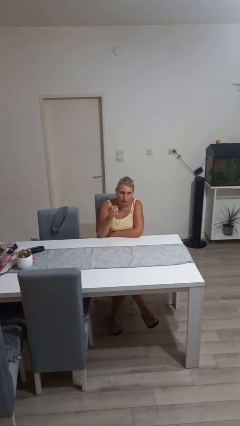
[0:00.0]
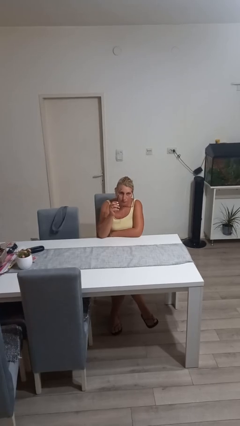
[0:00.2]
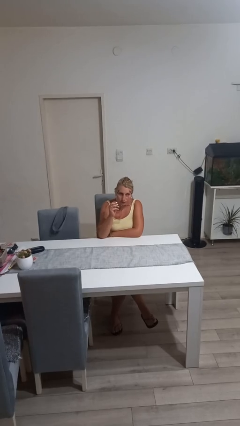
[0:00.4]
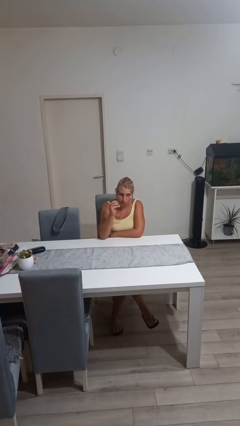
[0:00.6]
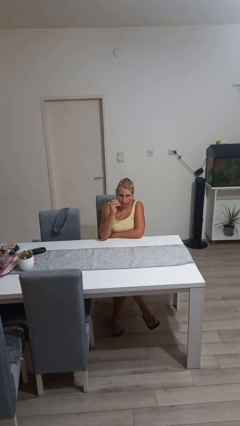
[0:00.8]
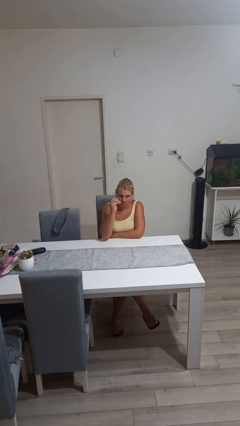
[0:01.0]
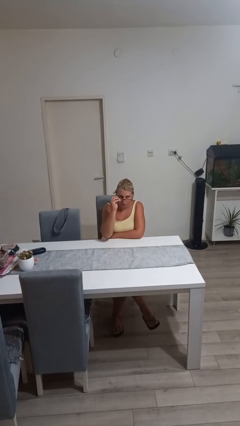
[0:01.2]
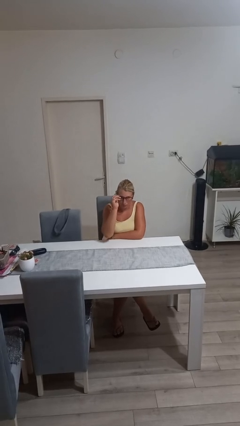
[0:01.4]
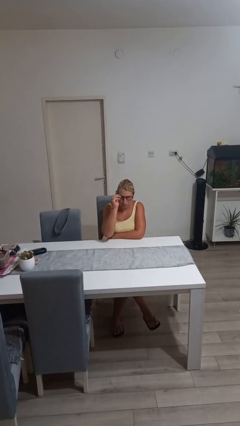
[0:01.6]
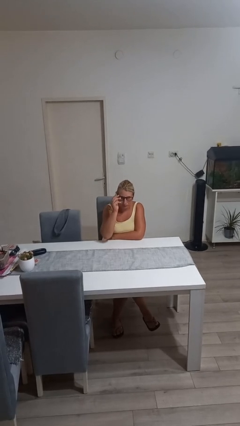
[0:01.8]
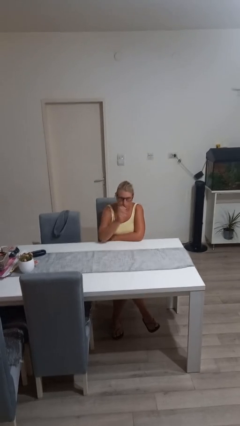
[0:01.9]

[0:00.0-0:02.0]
person puts on glasses

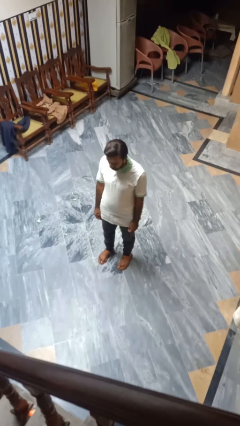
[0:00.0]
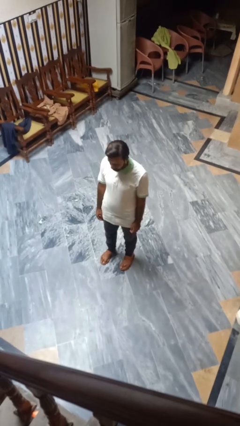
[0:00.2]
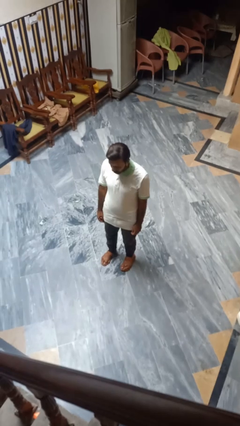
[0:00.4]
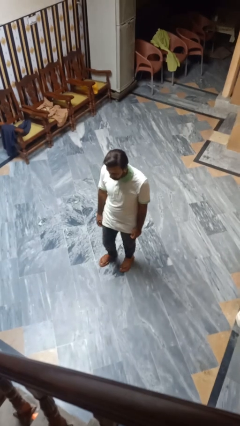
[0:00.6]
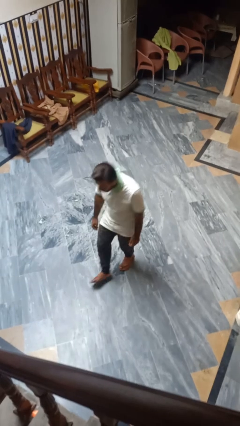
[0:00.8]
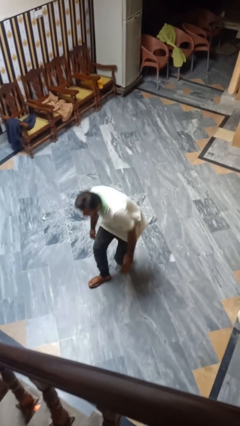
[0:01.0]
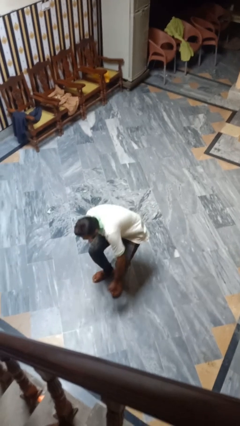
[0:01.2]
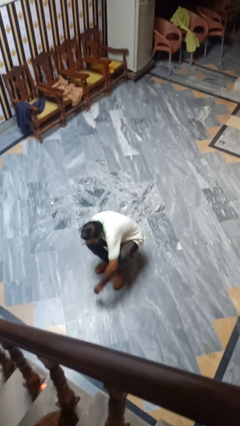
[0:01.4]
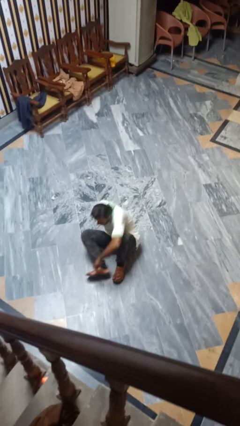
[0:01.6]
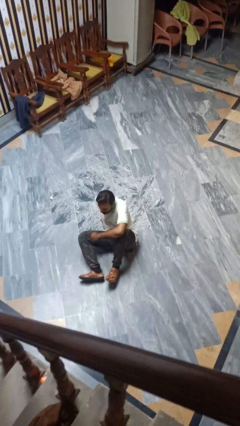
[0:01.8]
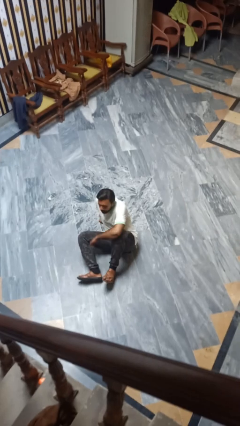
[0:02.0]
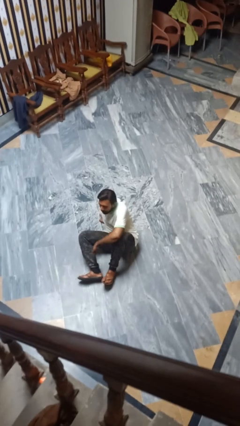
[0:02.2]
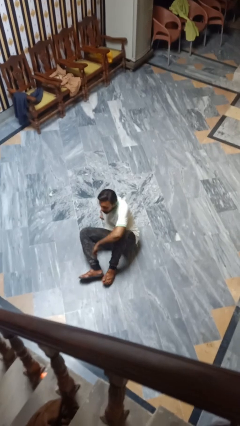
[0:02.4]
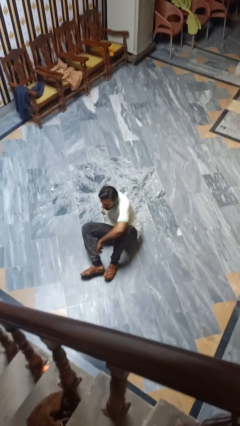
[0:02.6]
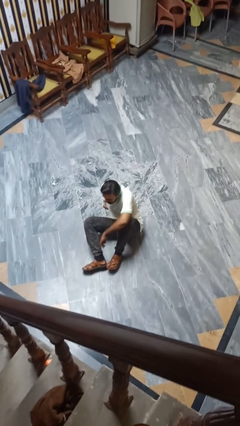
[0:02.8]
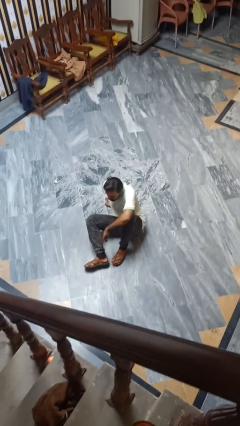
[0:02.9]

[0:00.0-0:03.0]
person falls while standing

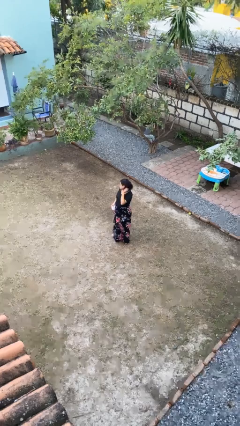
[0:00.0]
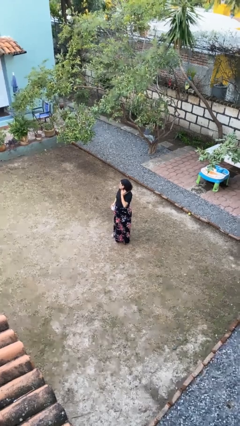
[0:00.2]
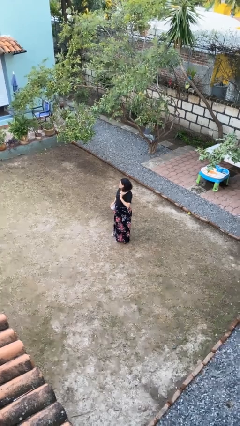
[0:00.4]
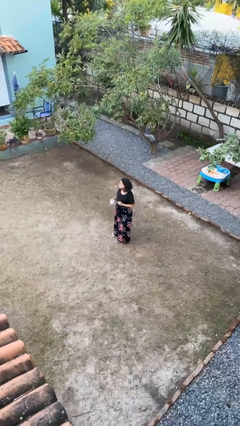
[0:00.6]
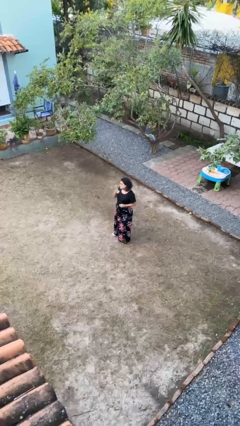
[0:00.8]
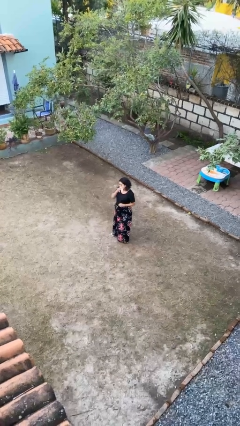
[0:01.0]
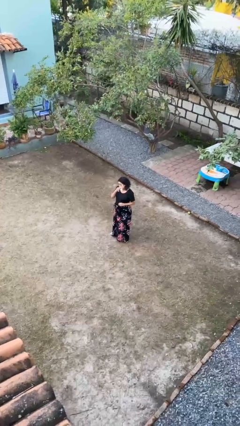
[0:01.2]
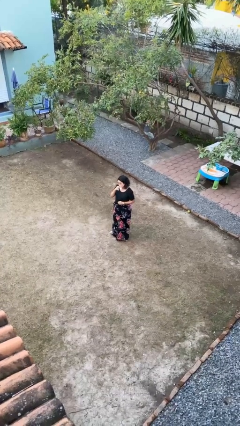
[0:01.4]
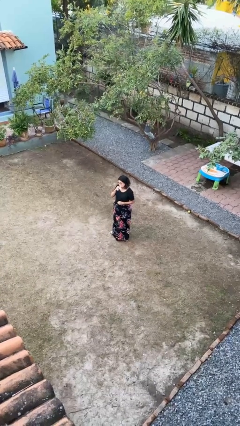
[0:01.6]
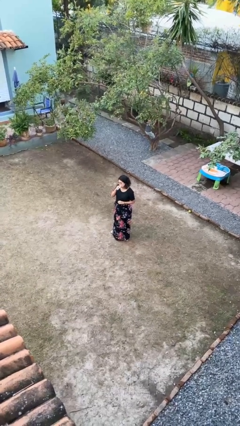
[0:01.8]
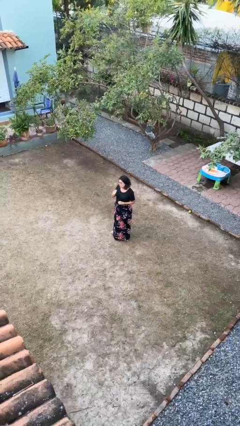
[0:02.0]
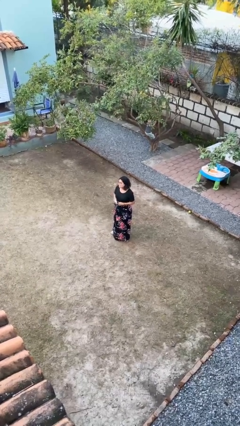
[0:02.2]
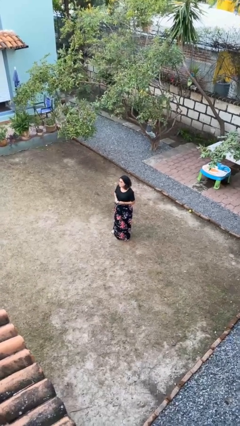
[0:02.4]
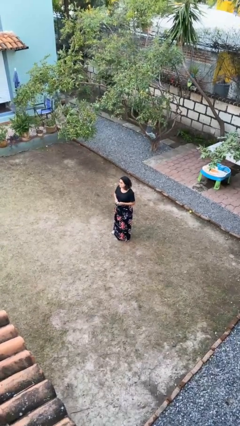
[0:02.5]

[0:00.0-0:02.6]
person wipes mouth with napkin

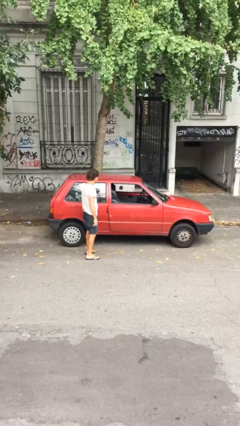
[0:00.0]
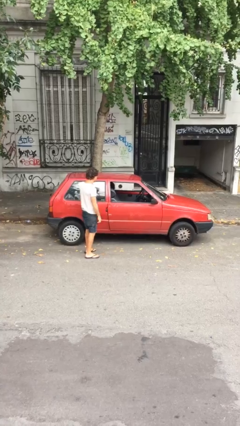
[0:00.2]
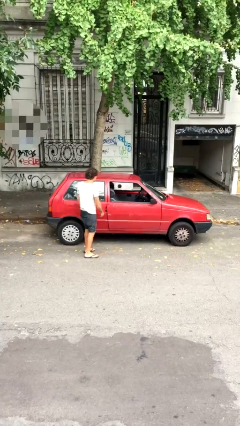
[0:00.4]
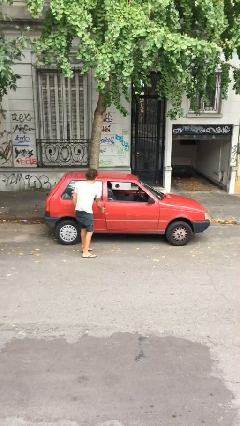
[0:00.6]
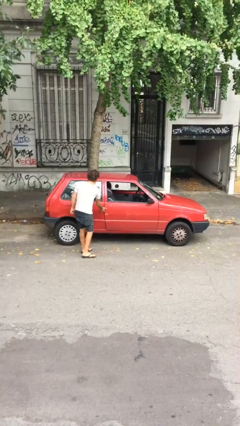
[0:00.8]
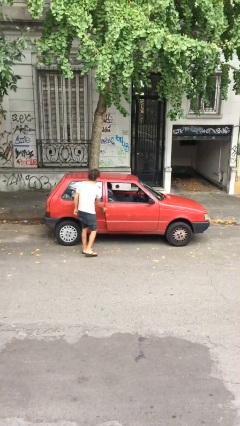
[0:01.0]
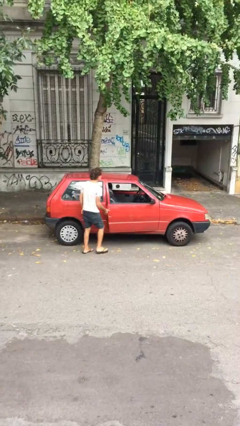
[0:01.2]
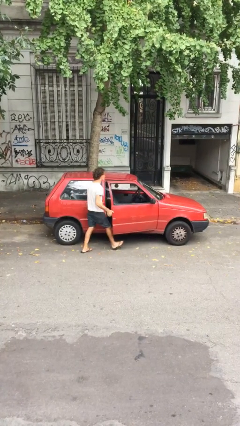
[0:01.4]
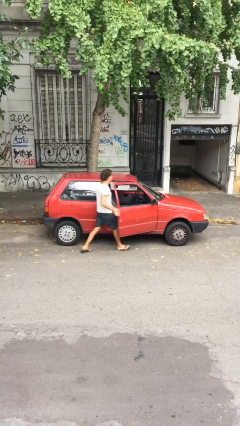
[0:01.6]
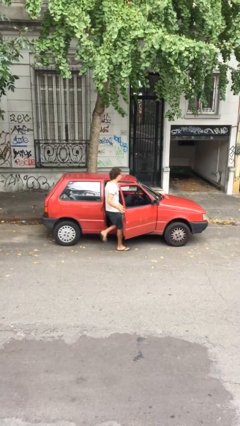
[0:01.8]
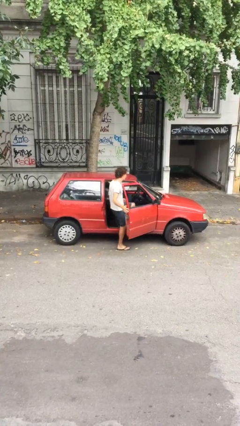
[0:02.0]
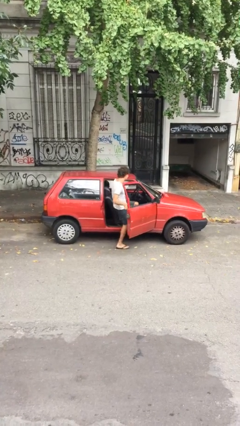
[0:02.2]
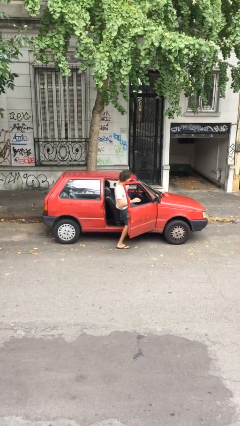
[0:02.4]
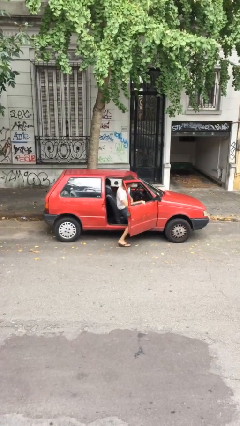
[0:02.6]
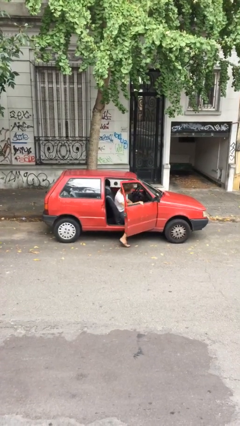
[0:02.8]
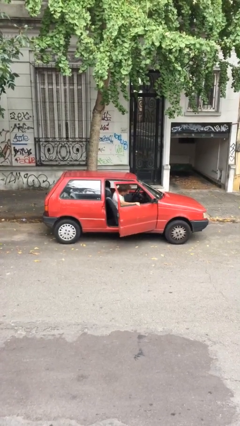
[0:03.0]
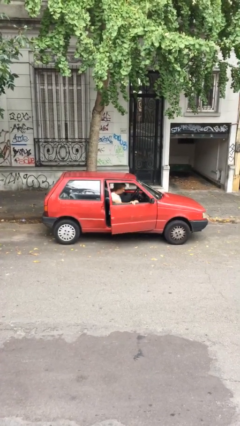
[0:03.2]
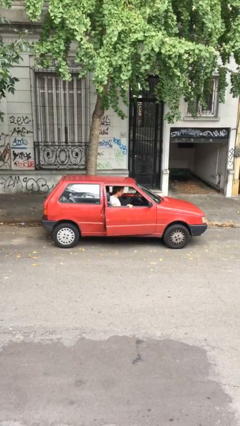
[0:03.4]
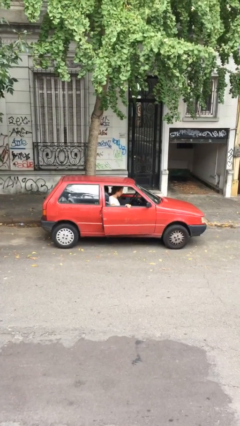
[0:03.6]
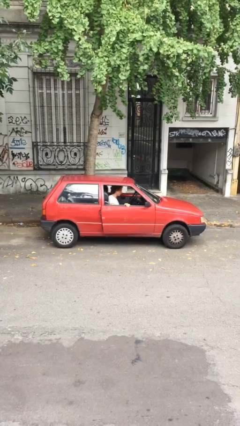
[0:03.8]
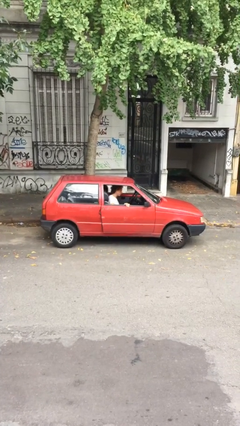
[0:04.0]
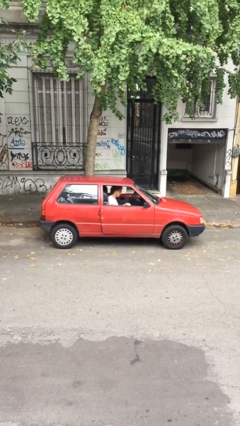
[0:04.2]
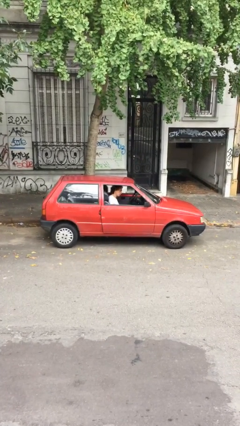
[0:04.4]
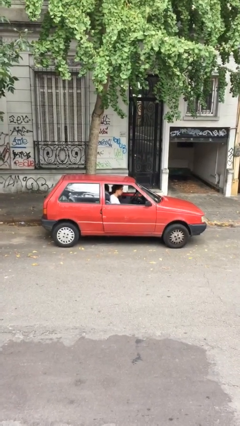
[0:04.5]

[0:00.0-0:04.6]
car picks up person

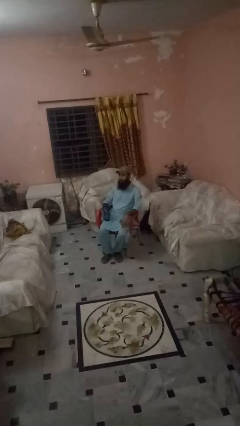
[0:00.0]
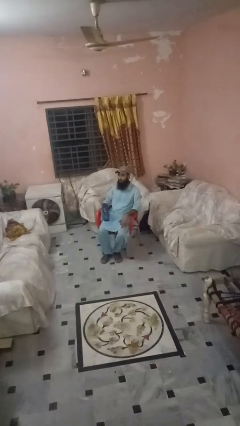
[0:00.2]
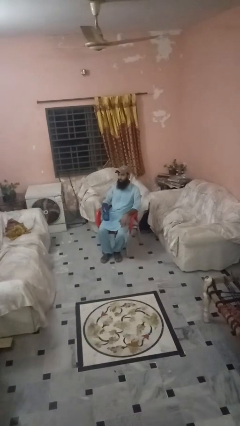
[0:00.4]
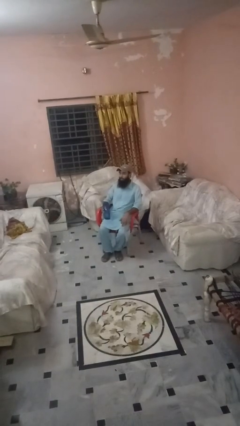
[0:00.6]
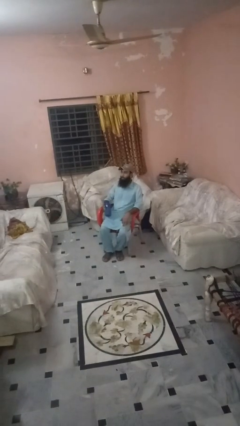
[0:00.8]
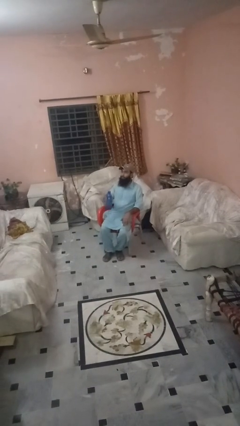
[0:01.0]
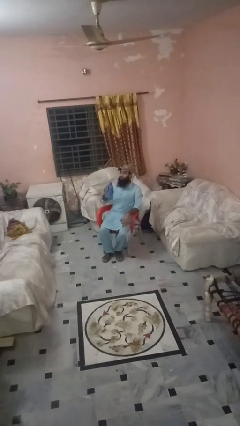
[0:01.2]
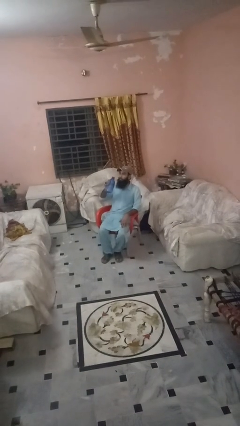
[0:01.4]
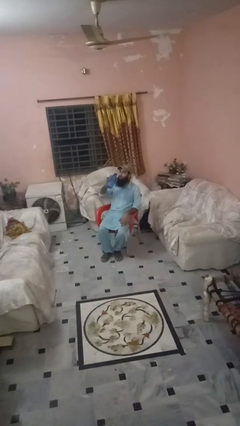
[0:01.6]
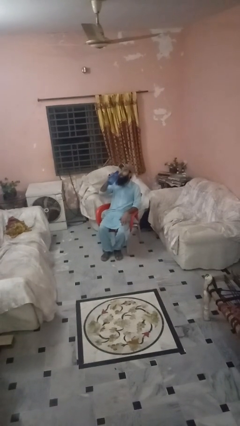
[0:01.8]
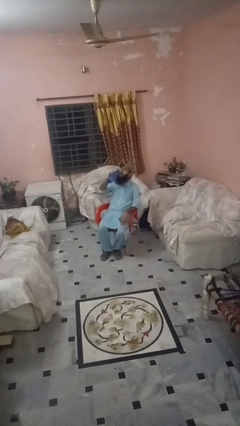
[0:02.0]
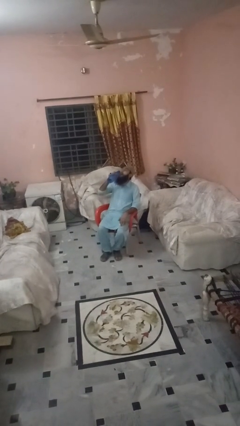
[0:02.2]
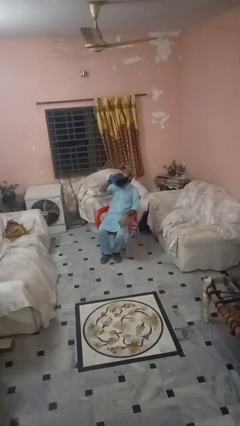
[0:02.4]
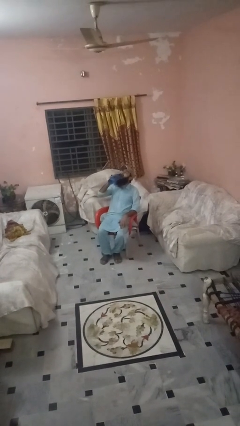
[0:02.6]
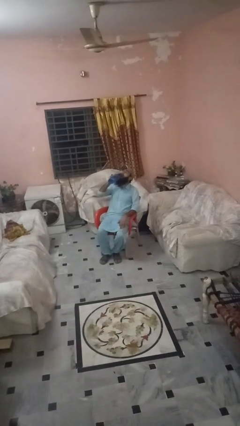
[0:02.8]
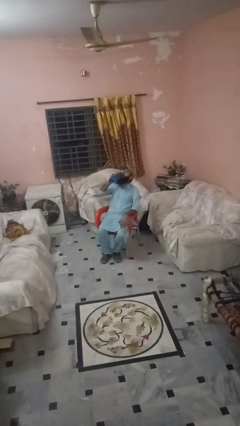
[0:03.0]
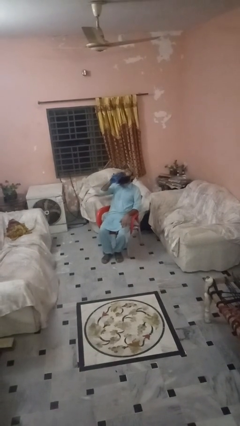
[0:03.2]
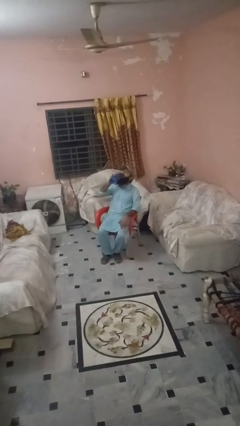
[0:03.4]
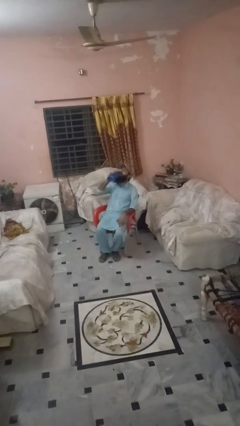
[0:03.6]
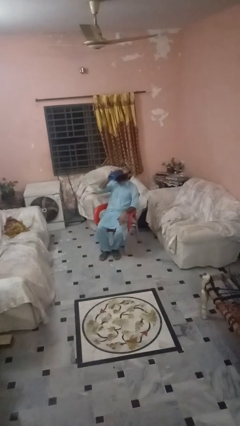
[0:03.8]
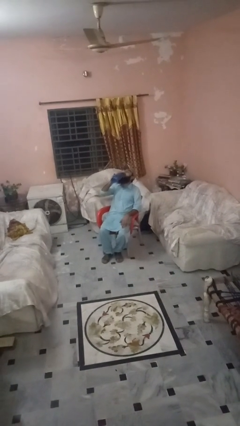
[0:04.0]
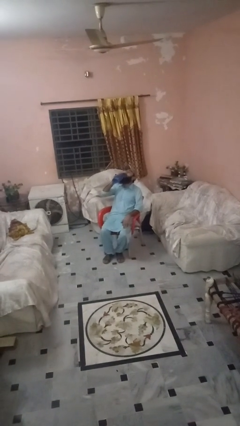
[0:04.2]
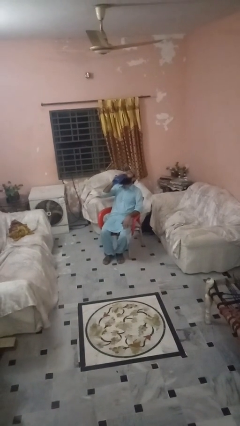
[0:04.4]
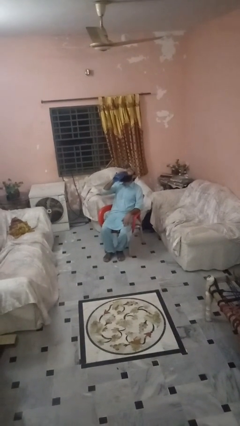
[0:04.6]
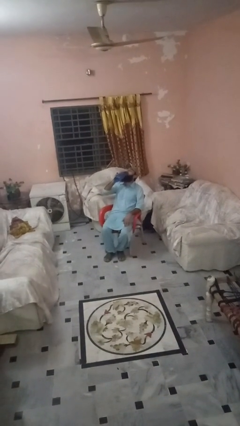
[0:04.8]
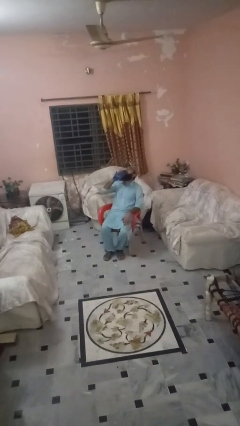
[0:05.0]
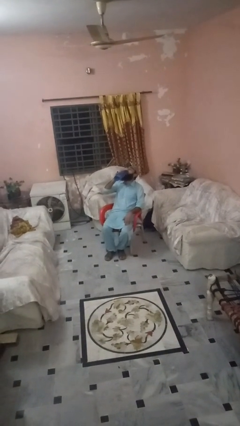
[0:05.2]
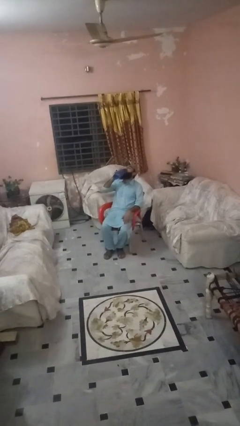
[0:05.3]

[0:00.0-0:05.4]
person drinks from bottle
